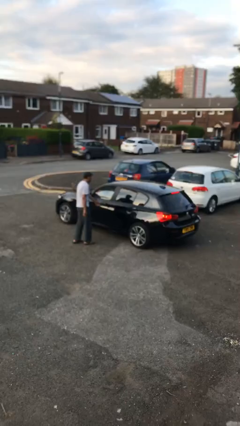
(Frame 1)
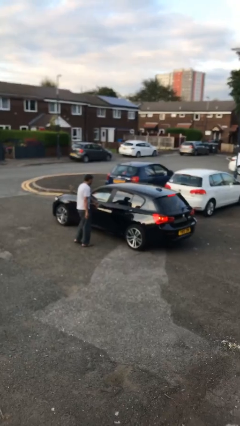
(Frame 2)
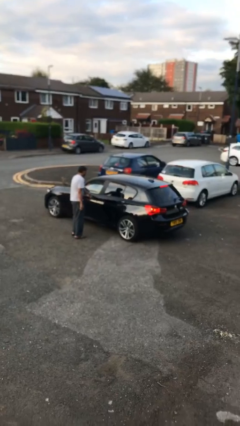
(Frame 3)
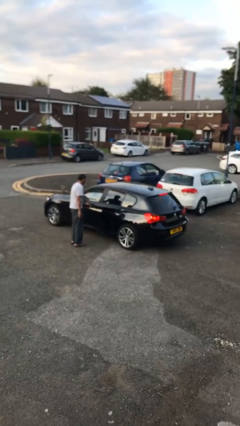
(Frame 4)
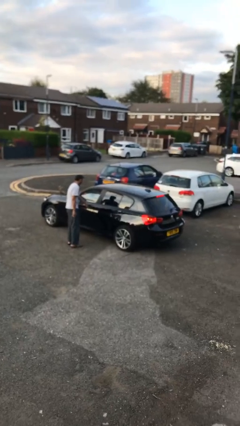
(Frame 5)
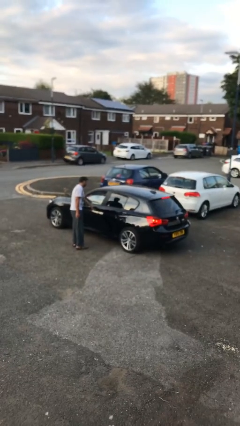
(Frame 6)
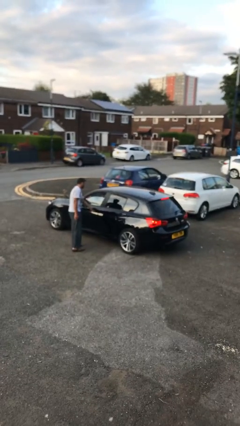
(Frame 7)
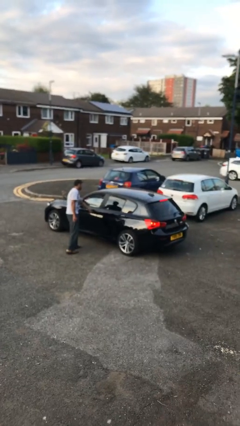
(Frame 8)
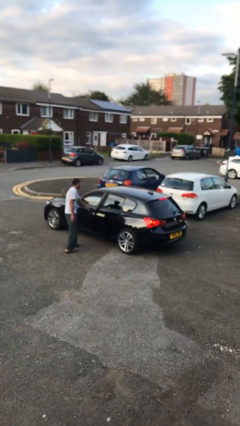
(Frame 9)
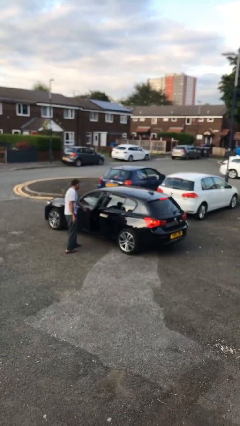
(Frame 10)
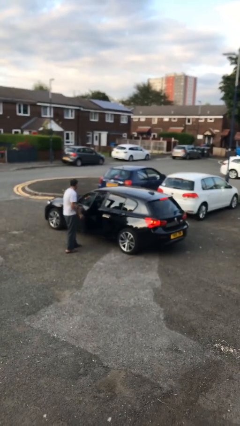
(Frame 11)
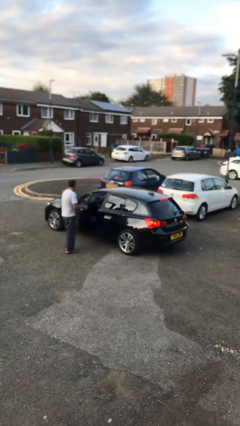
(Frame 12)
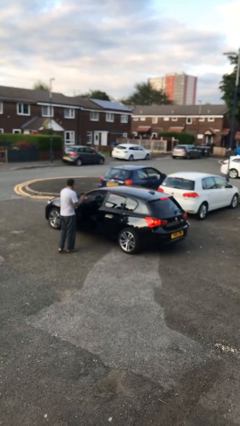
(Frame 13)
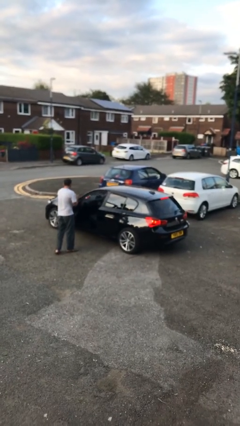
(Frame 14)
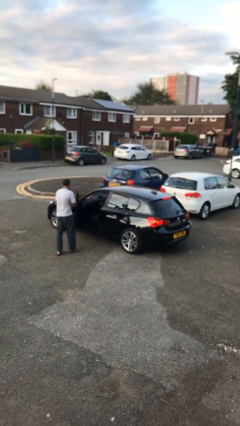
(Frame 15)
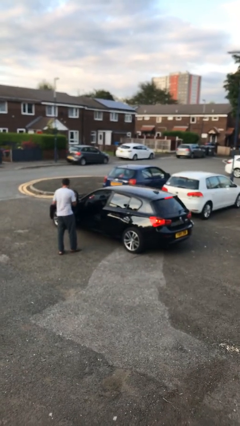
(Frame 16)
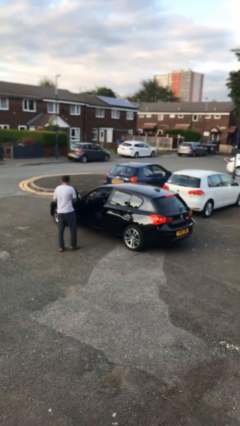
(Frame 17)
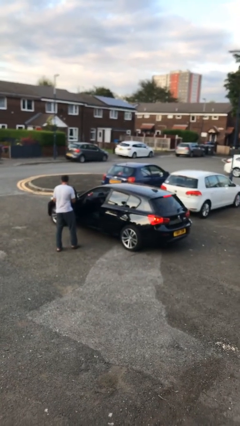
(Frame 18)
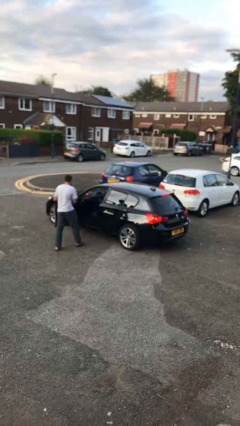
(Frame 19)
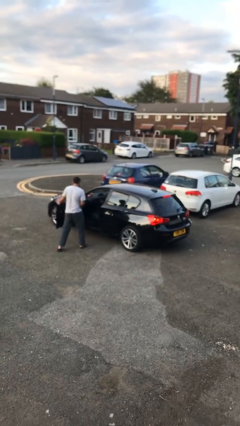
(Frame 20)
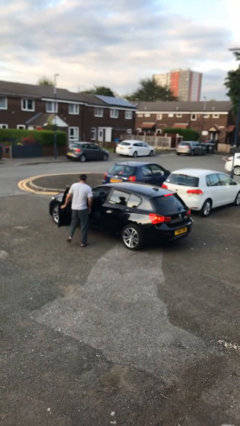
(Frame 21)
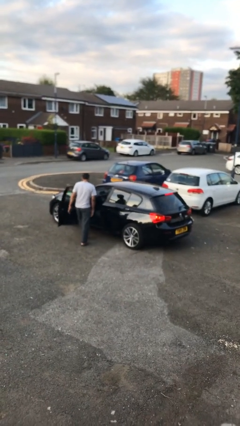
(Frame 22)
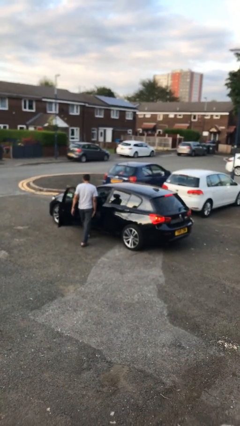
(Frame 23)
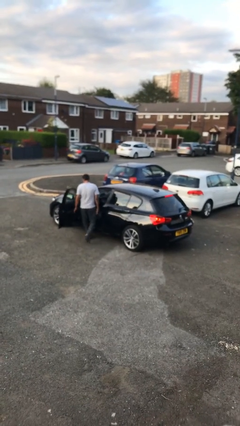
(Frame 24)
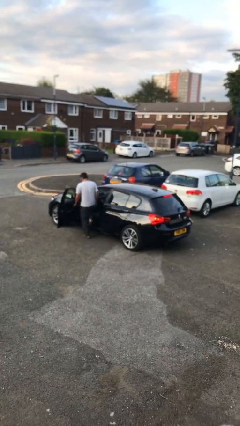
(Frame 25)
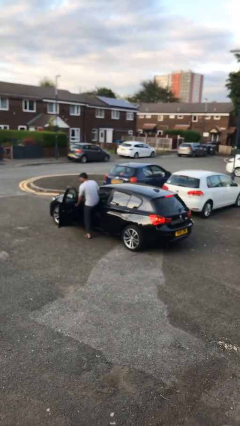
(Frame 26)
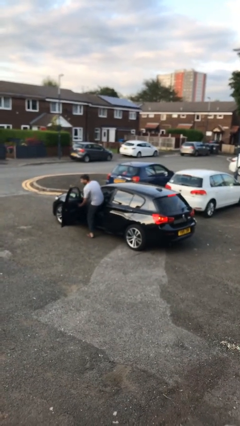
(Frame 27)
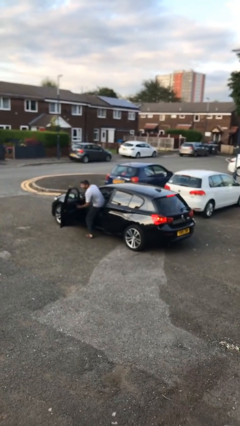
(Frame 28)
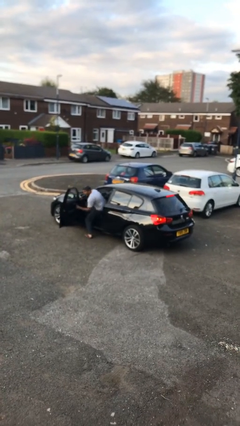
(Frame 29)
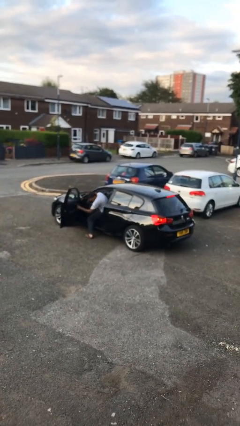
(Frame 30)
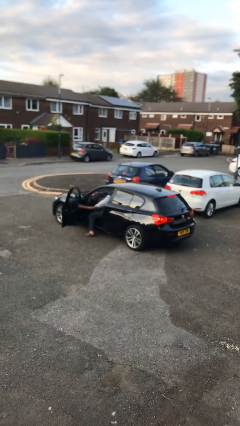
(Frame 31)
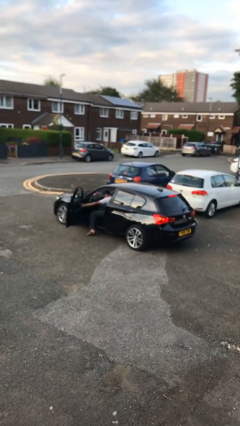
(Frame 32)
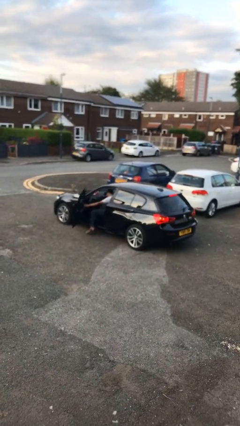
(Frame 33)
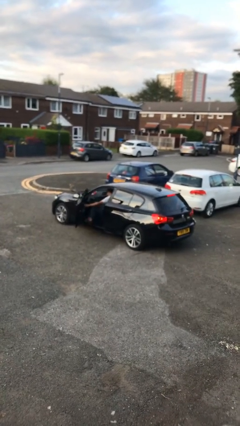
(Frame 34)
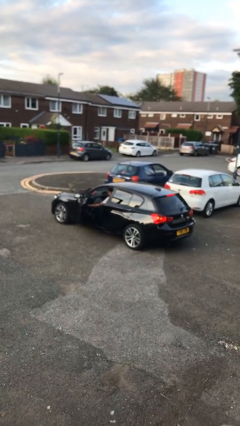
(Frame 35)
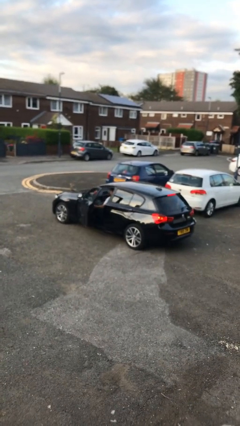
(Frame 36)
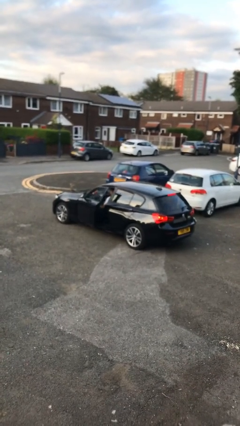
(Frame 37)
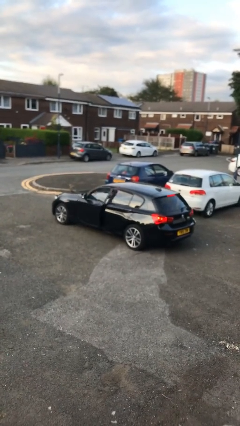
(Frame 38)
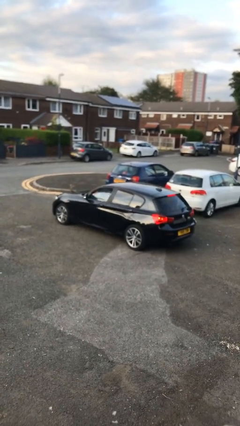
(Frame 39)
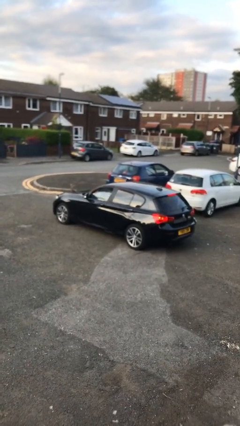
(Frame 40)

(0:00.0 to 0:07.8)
car picks up person

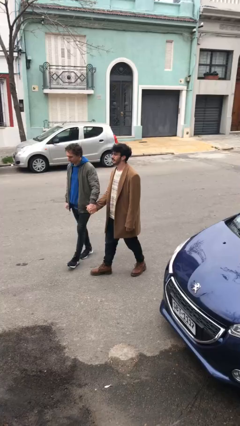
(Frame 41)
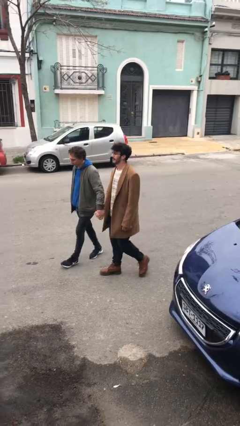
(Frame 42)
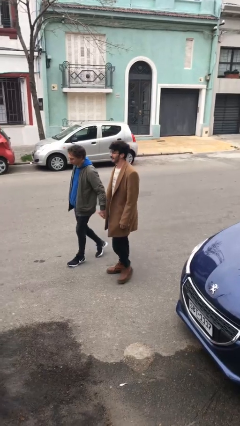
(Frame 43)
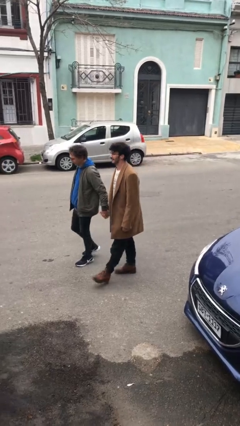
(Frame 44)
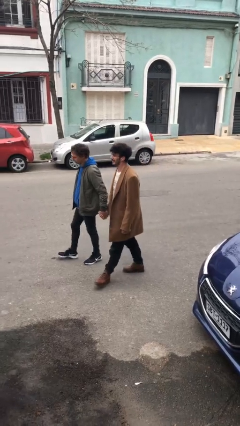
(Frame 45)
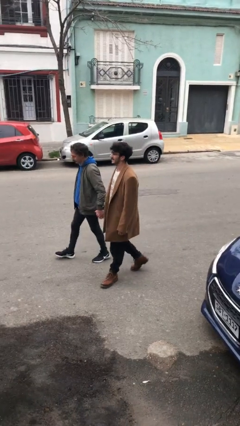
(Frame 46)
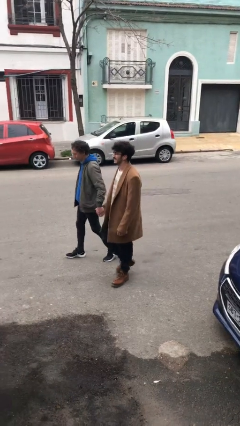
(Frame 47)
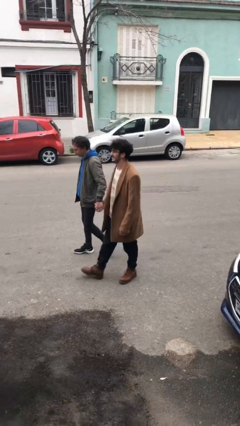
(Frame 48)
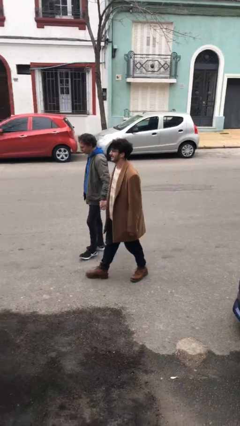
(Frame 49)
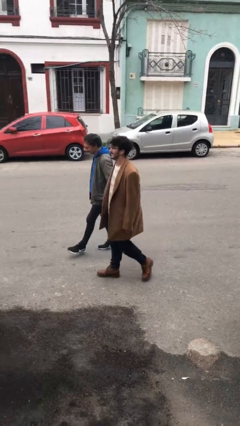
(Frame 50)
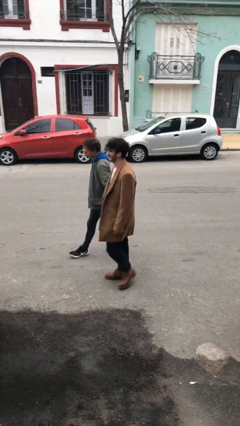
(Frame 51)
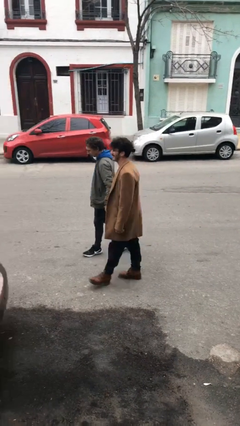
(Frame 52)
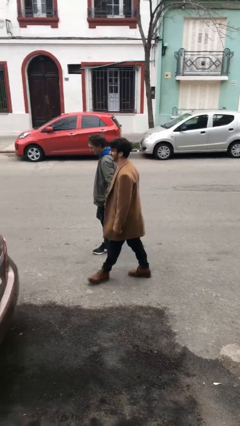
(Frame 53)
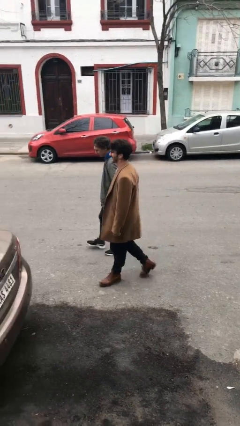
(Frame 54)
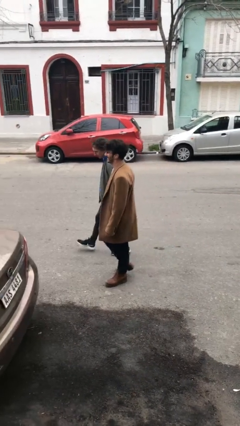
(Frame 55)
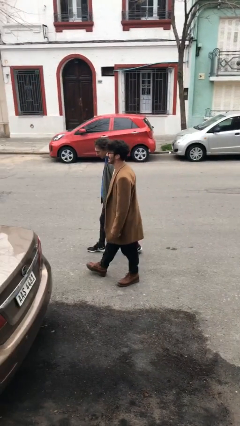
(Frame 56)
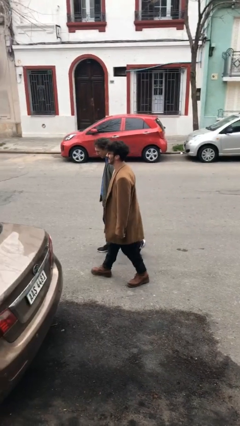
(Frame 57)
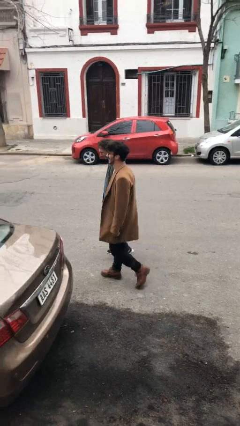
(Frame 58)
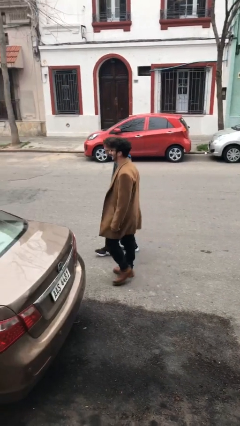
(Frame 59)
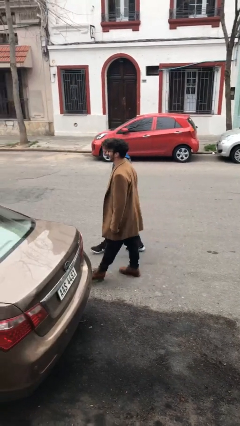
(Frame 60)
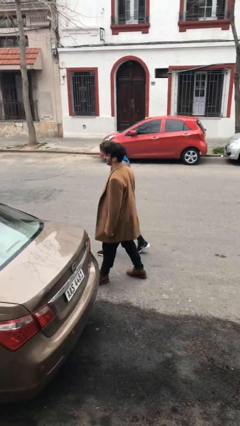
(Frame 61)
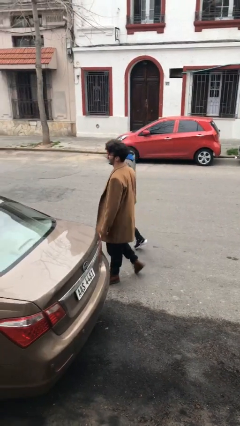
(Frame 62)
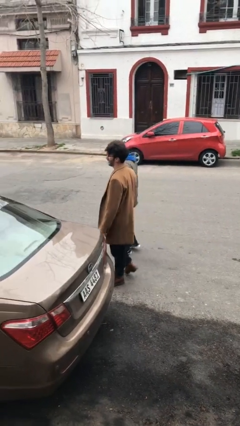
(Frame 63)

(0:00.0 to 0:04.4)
person holds hand

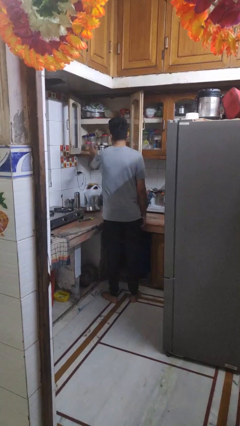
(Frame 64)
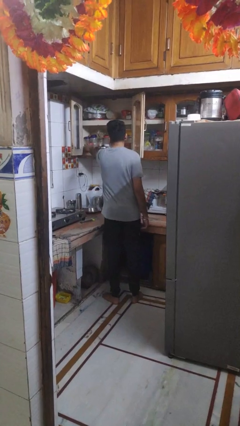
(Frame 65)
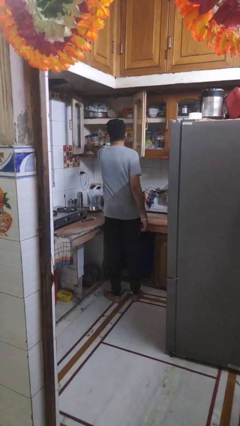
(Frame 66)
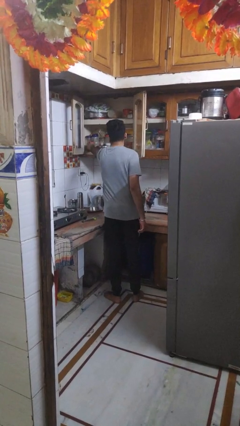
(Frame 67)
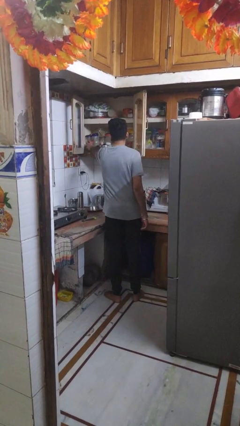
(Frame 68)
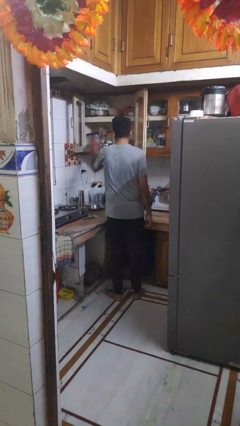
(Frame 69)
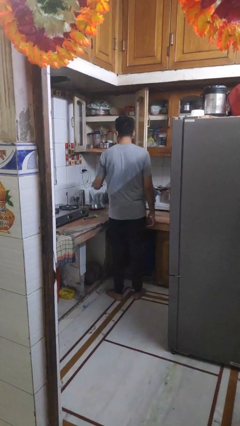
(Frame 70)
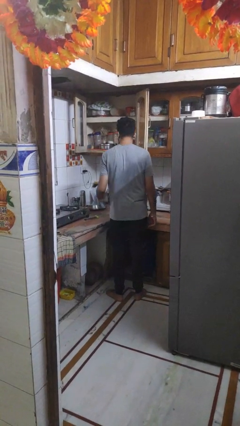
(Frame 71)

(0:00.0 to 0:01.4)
person takes object from cabinet

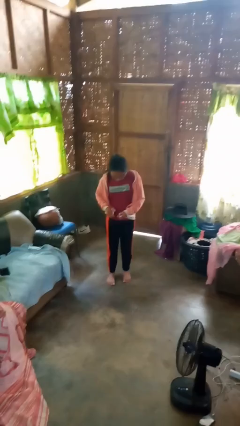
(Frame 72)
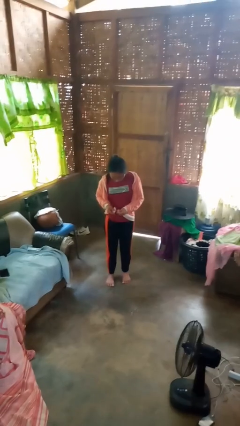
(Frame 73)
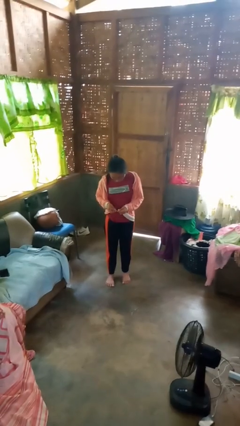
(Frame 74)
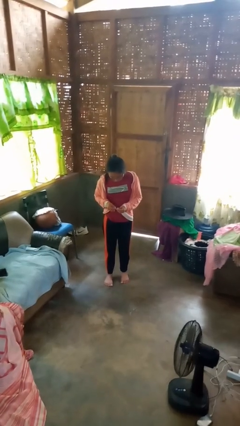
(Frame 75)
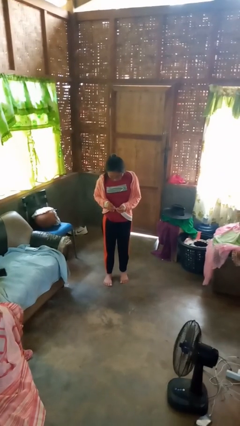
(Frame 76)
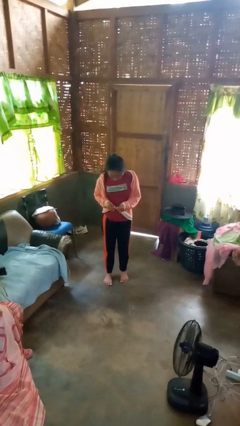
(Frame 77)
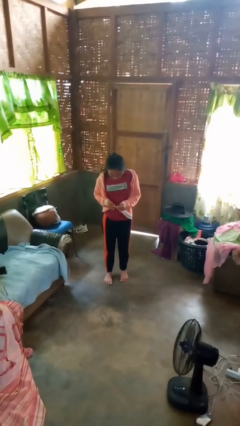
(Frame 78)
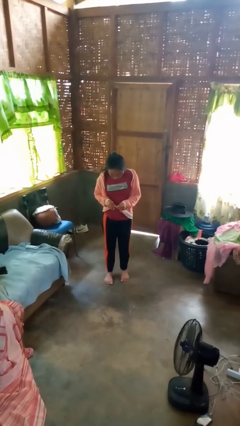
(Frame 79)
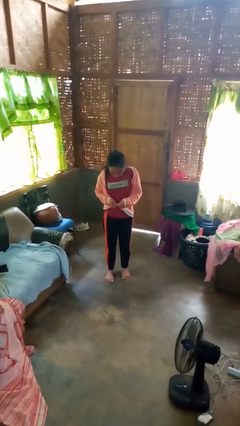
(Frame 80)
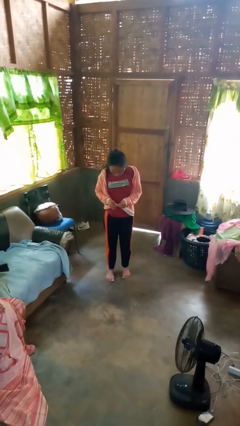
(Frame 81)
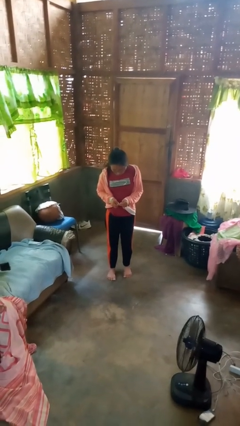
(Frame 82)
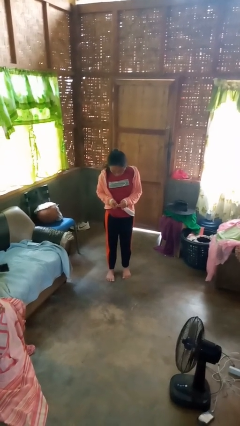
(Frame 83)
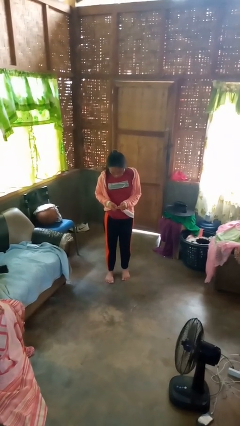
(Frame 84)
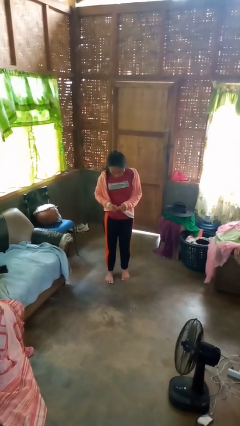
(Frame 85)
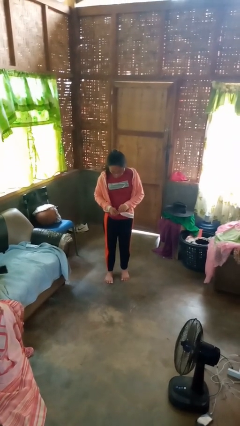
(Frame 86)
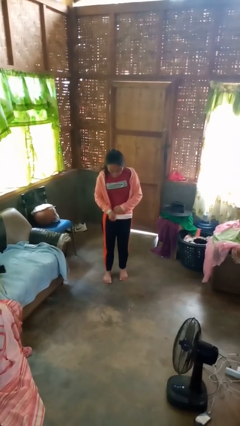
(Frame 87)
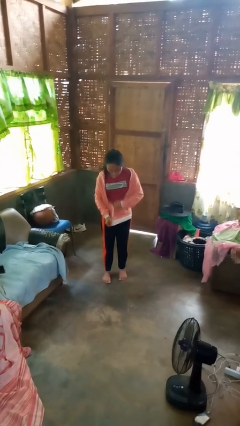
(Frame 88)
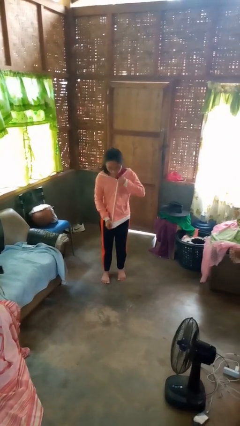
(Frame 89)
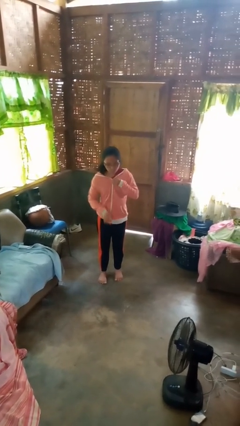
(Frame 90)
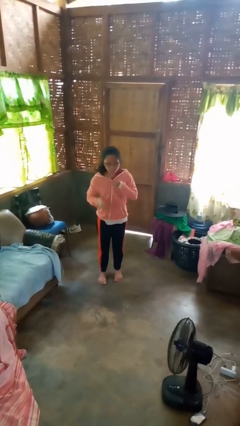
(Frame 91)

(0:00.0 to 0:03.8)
person zips up jacket
